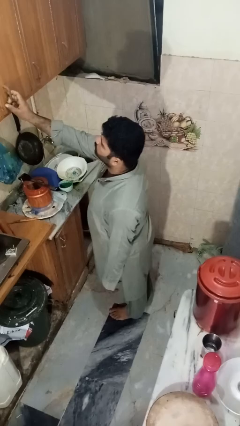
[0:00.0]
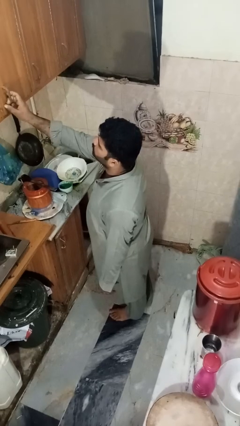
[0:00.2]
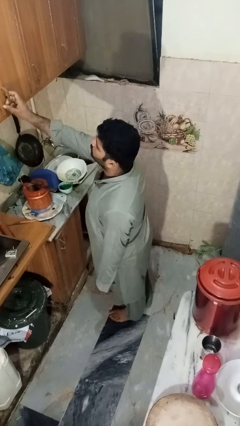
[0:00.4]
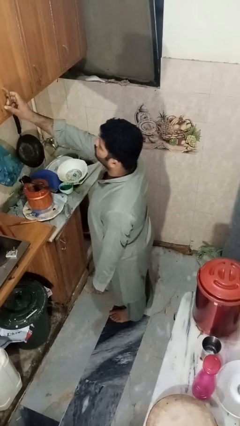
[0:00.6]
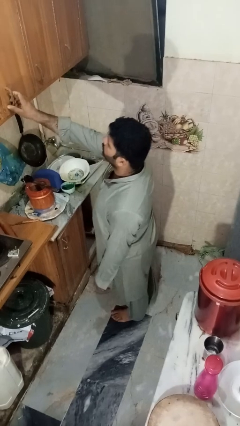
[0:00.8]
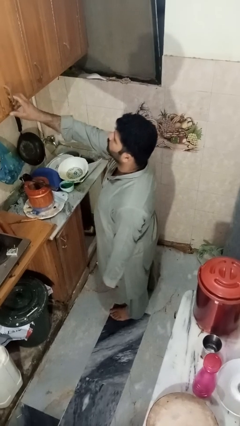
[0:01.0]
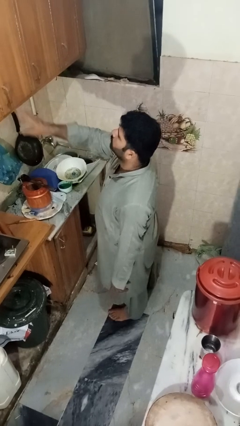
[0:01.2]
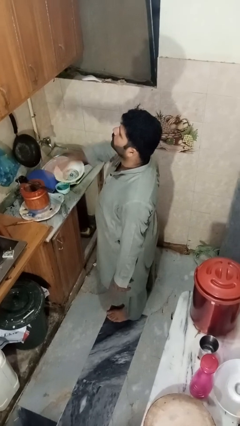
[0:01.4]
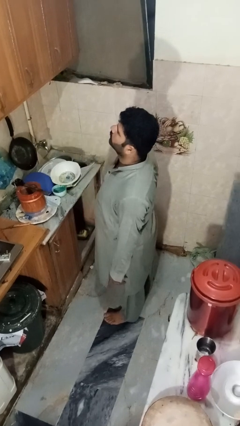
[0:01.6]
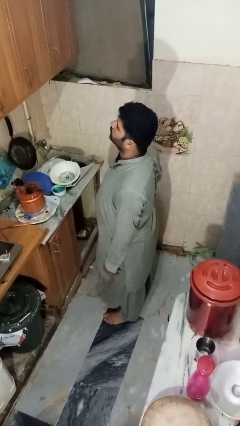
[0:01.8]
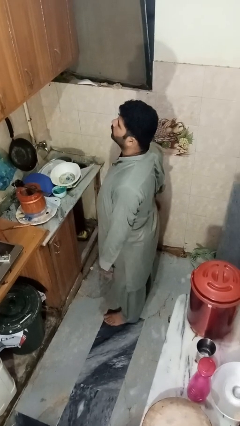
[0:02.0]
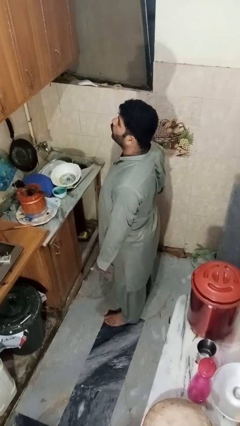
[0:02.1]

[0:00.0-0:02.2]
person closes cabinet

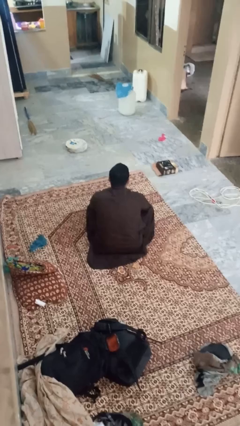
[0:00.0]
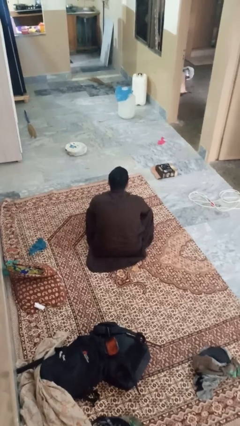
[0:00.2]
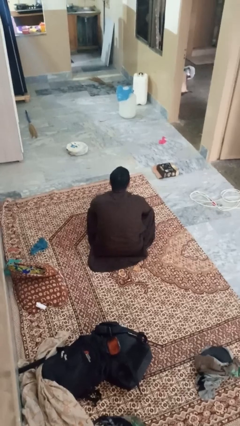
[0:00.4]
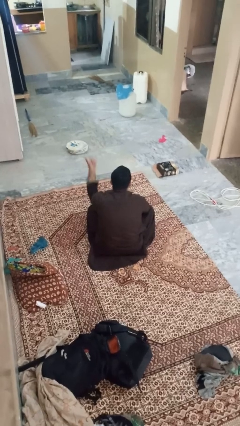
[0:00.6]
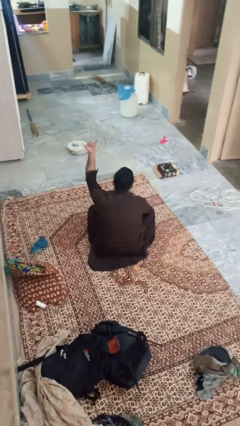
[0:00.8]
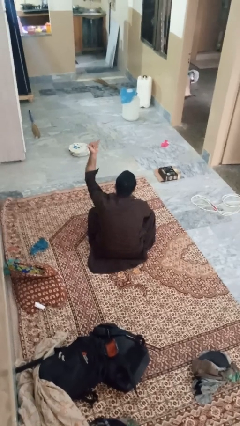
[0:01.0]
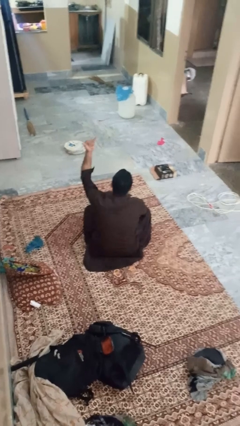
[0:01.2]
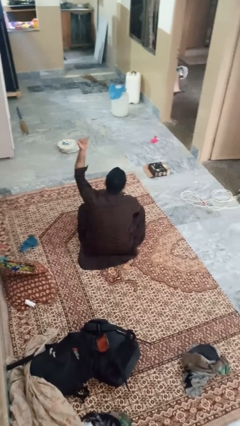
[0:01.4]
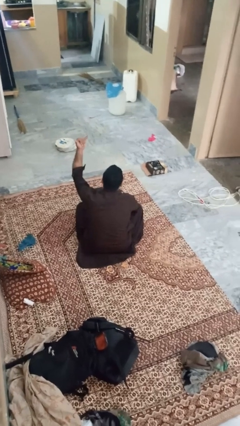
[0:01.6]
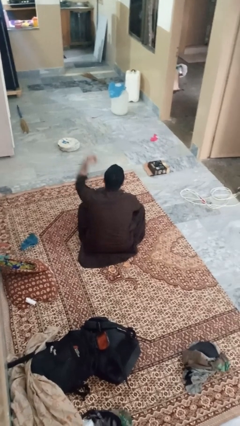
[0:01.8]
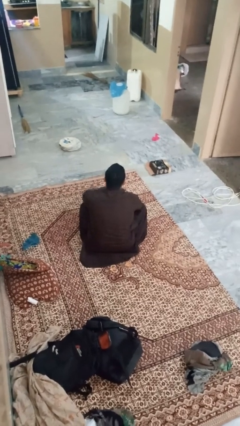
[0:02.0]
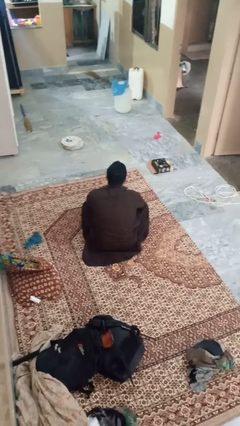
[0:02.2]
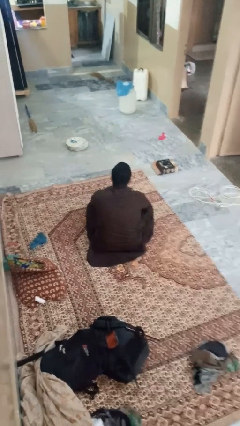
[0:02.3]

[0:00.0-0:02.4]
person gestures hang loose

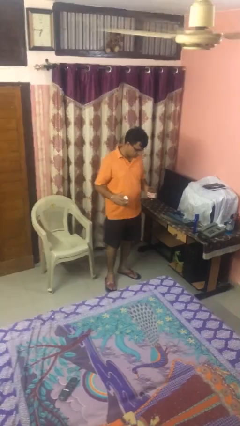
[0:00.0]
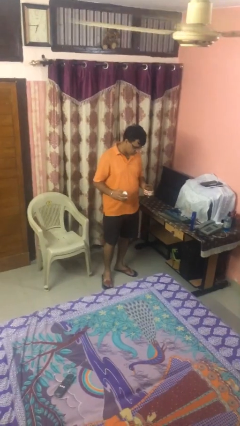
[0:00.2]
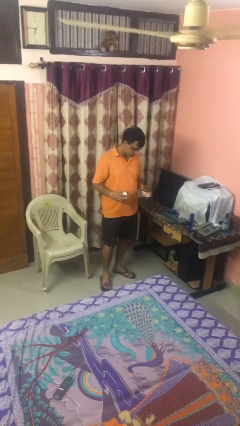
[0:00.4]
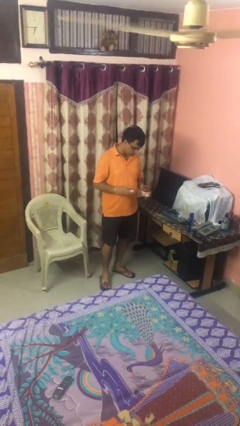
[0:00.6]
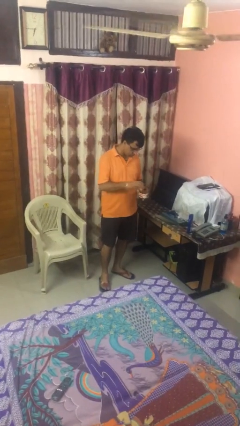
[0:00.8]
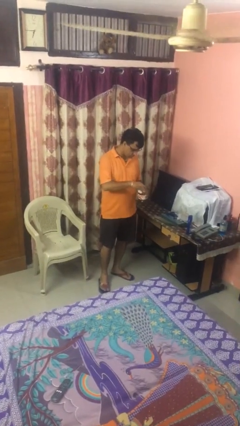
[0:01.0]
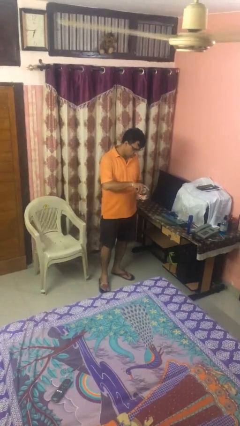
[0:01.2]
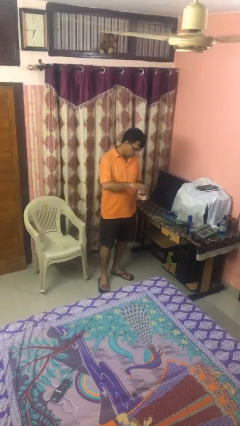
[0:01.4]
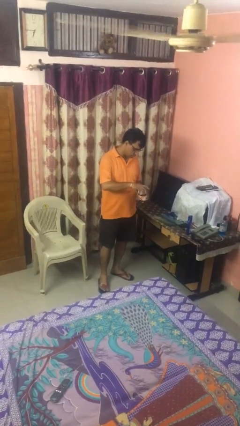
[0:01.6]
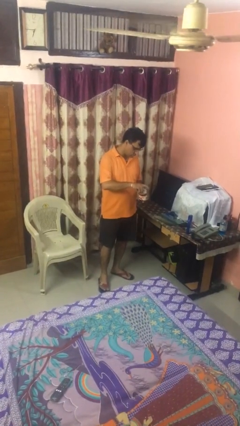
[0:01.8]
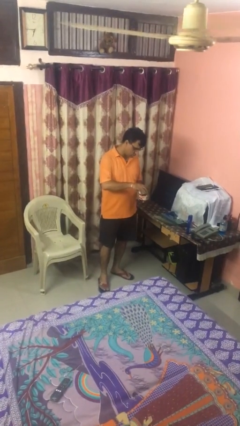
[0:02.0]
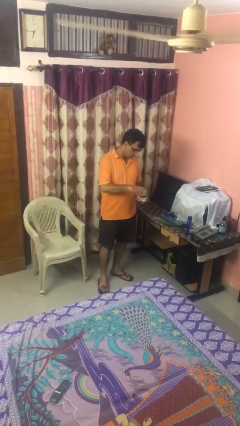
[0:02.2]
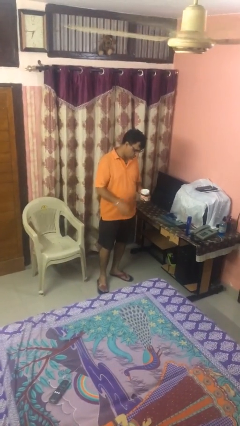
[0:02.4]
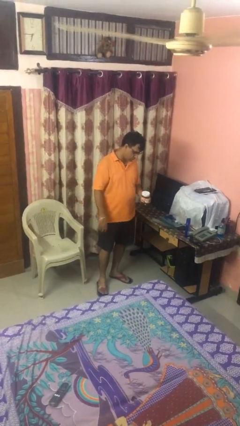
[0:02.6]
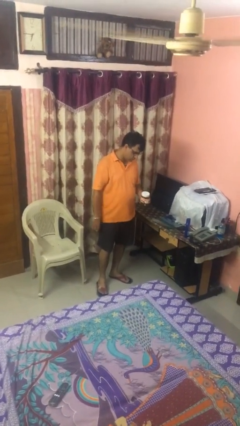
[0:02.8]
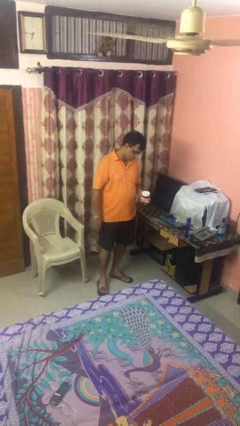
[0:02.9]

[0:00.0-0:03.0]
person closes jar

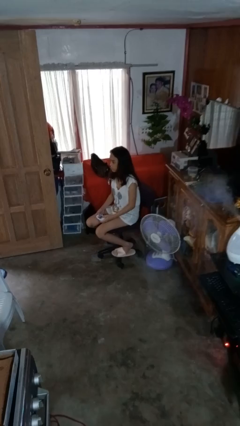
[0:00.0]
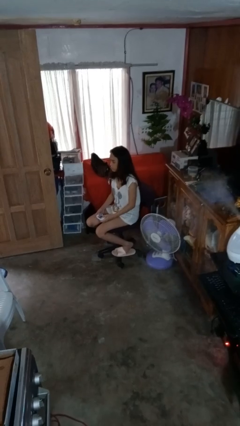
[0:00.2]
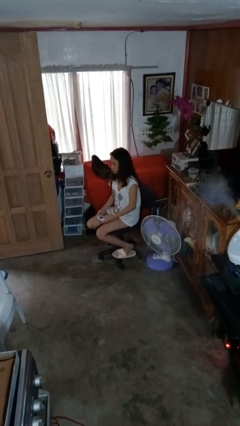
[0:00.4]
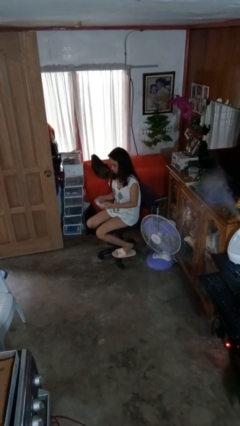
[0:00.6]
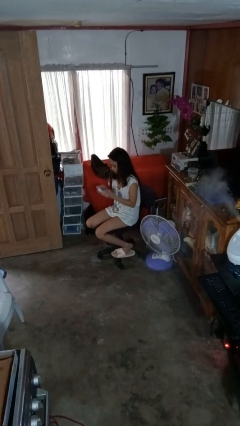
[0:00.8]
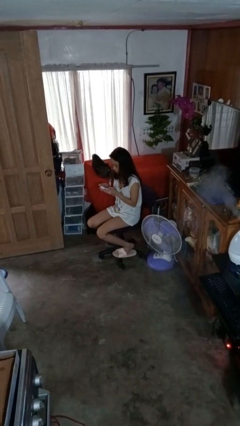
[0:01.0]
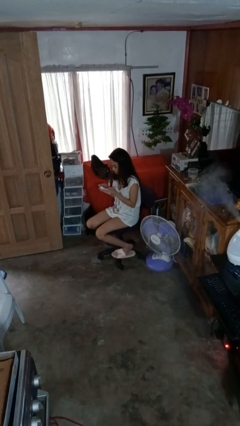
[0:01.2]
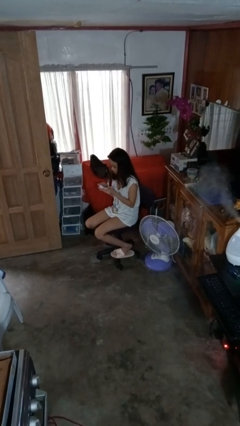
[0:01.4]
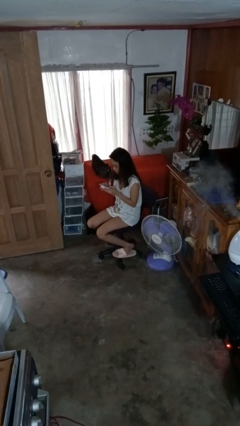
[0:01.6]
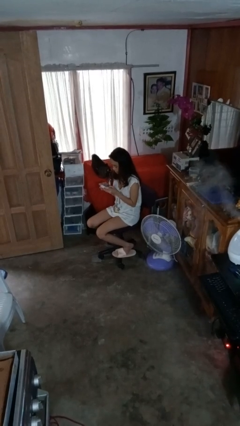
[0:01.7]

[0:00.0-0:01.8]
person interacts with handheld game

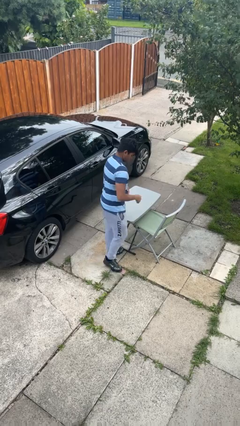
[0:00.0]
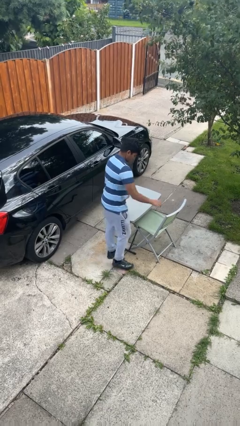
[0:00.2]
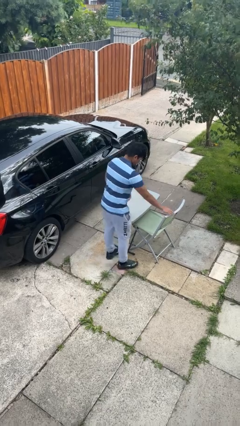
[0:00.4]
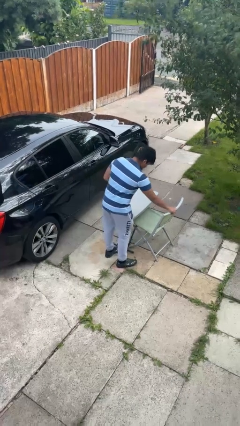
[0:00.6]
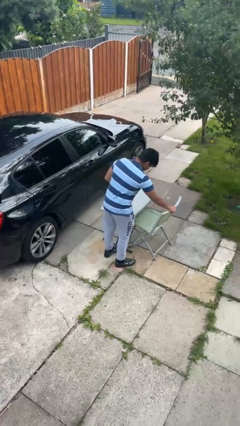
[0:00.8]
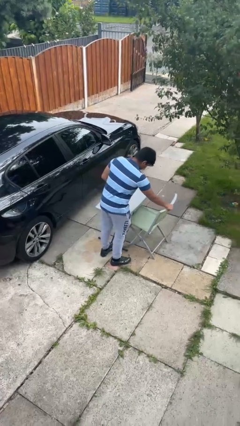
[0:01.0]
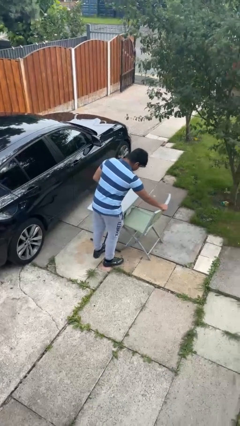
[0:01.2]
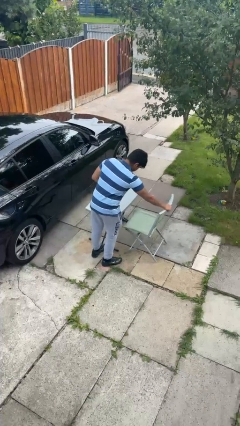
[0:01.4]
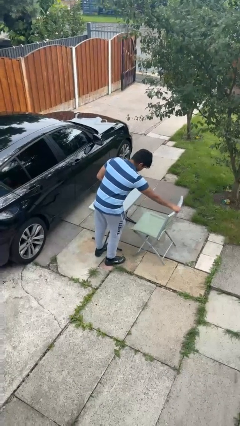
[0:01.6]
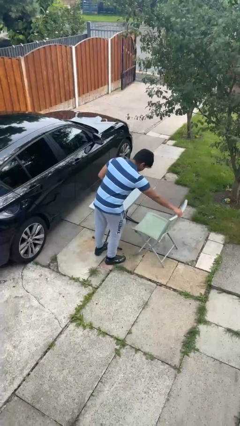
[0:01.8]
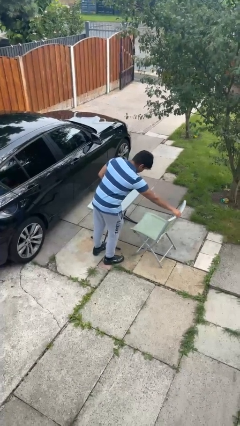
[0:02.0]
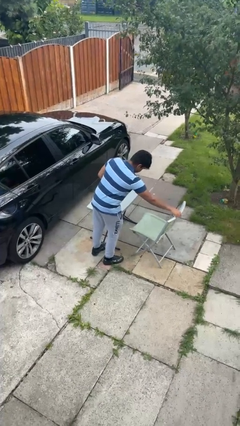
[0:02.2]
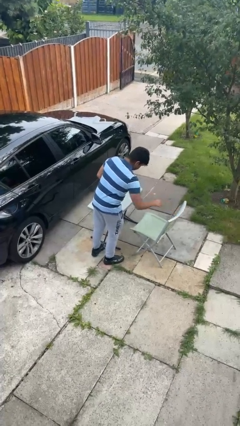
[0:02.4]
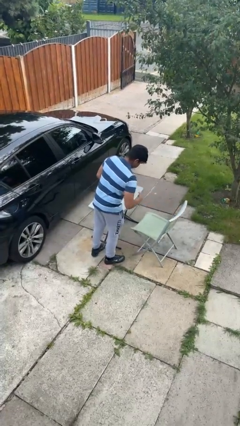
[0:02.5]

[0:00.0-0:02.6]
person pulls out chair

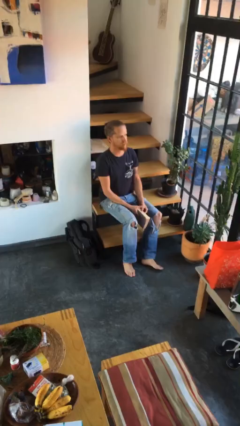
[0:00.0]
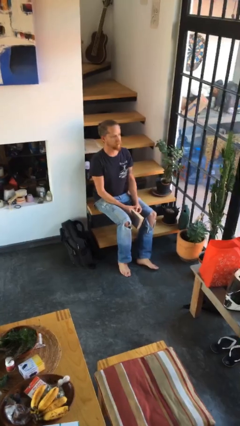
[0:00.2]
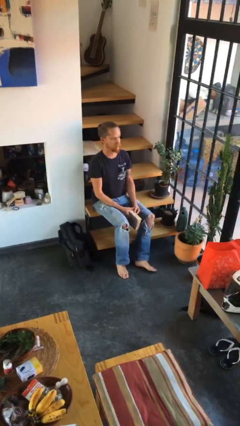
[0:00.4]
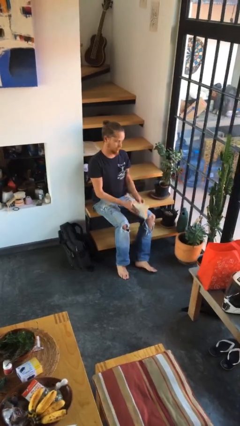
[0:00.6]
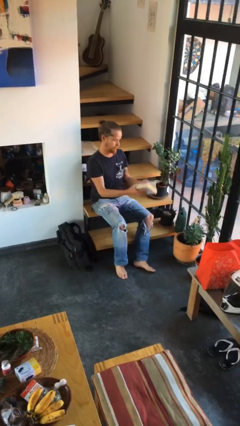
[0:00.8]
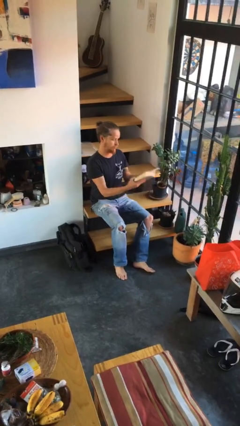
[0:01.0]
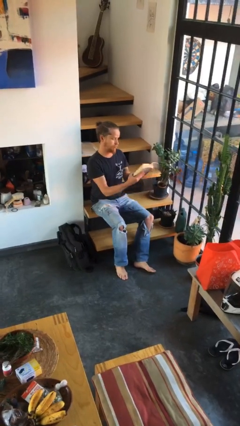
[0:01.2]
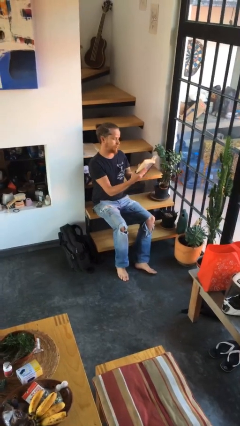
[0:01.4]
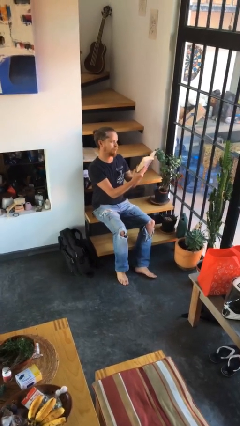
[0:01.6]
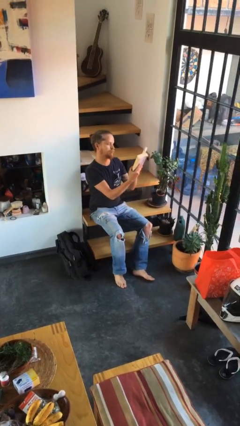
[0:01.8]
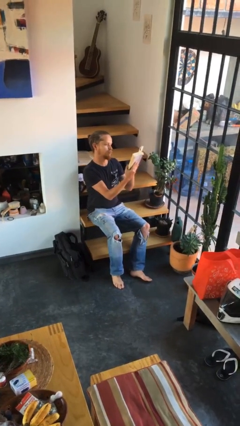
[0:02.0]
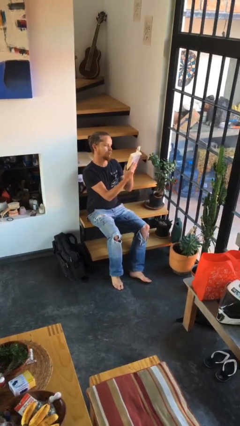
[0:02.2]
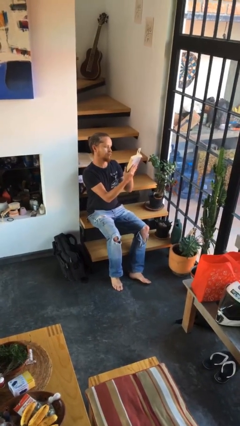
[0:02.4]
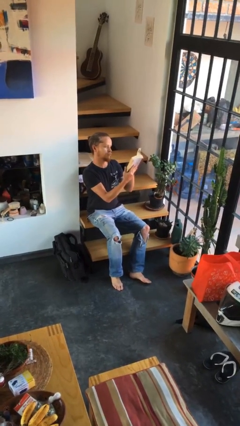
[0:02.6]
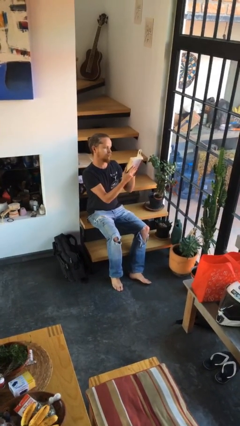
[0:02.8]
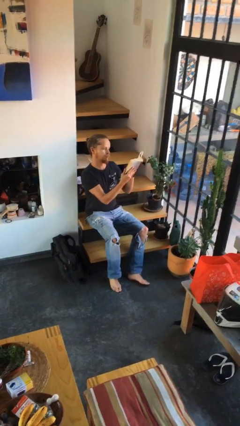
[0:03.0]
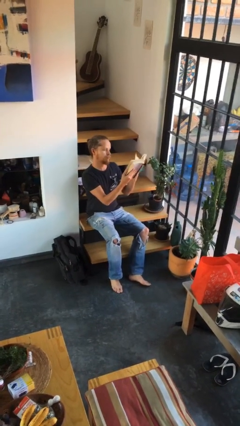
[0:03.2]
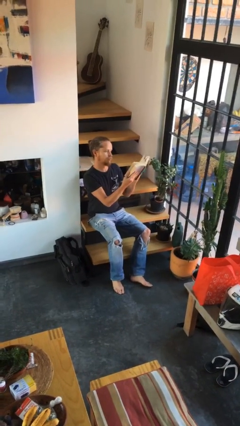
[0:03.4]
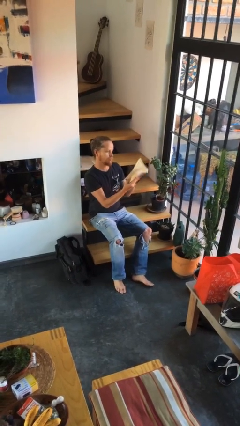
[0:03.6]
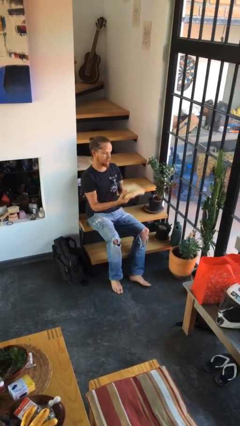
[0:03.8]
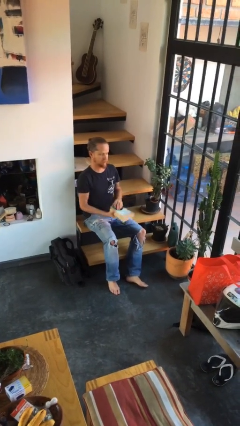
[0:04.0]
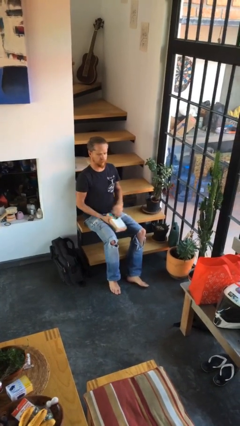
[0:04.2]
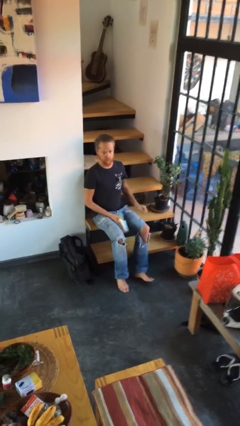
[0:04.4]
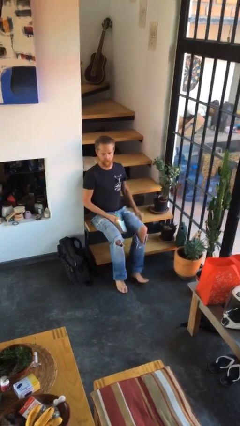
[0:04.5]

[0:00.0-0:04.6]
person reads book

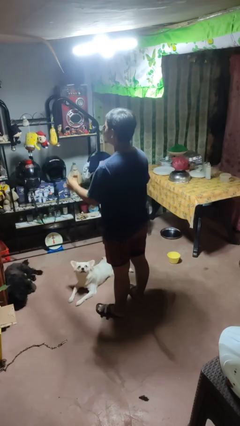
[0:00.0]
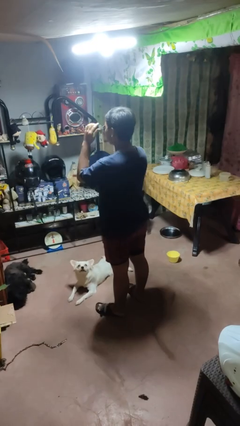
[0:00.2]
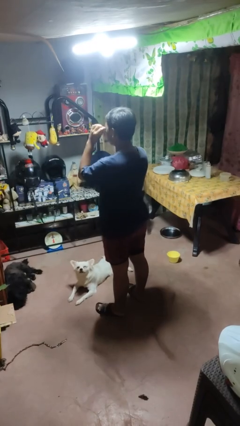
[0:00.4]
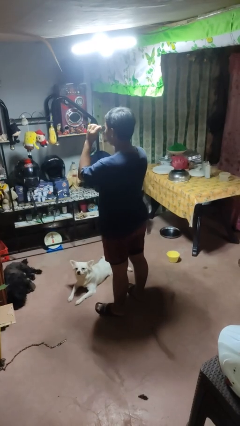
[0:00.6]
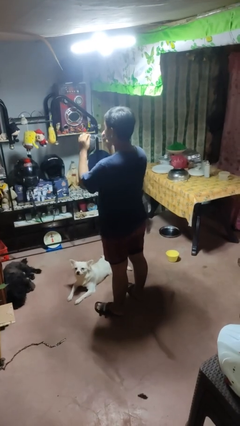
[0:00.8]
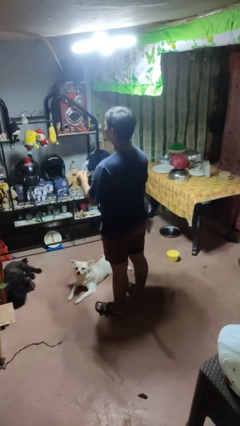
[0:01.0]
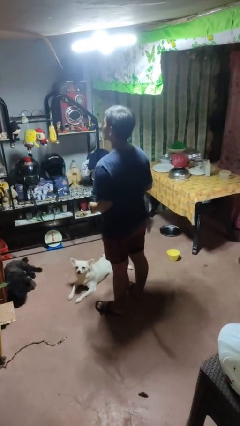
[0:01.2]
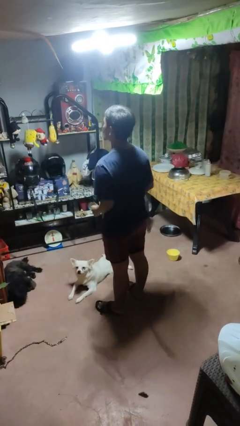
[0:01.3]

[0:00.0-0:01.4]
person takes off sunglasses
